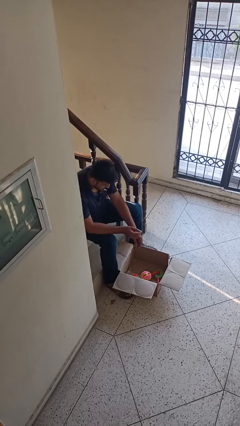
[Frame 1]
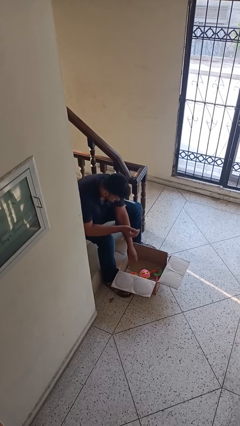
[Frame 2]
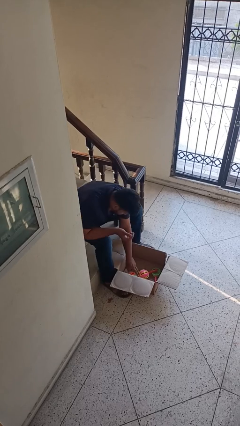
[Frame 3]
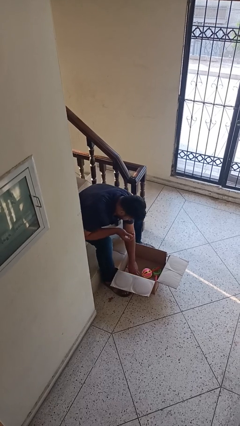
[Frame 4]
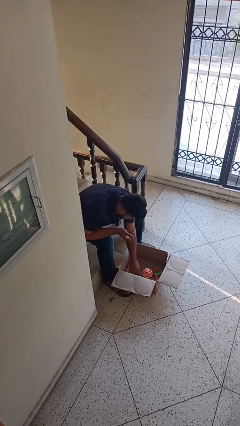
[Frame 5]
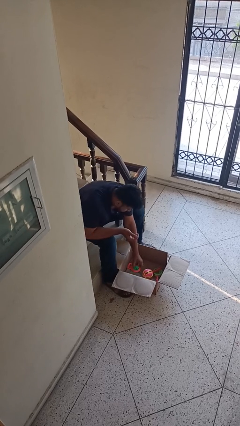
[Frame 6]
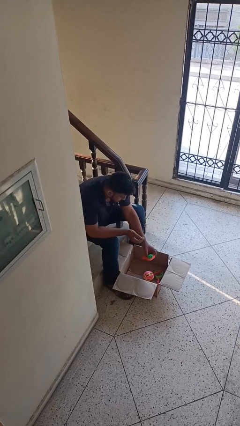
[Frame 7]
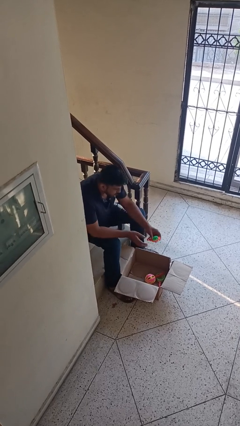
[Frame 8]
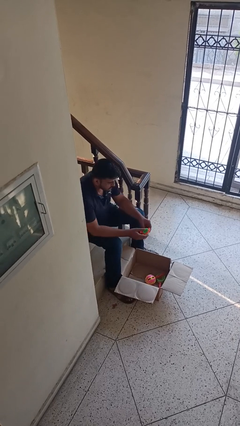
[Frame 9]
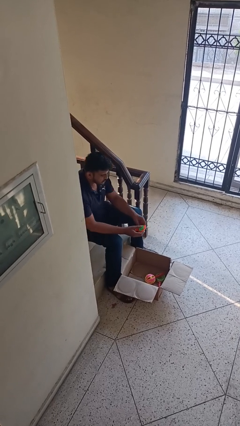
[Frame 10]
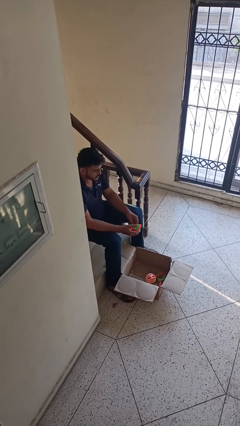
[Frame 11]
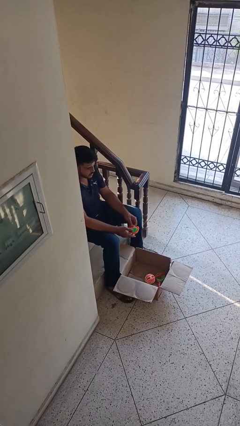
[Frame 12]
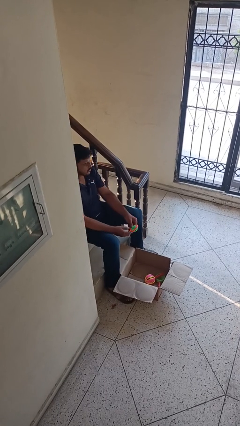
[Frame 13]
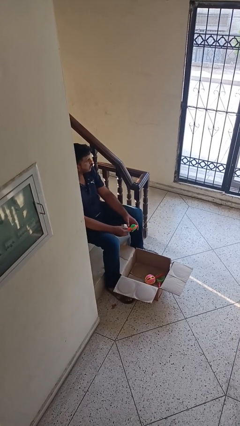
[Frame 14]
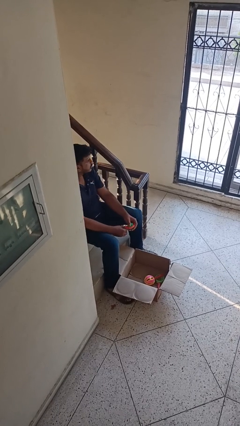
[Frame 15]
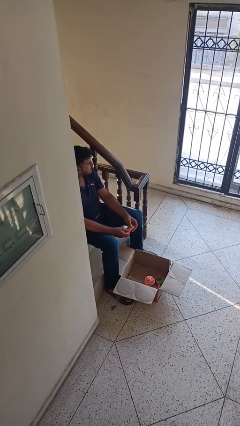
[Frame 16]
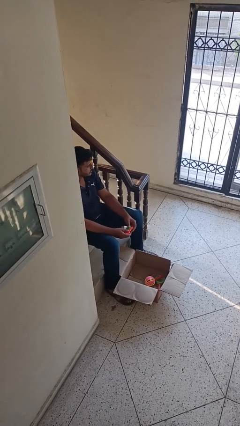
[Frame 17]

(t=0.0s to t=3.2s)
person takes object from box

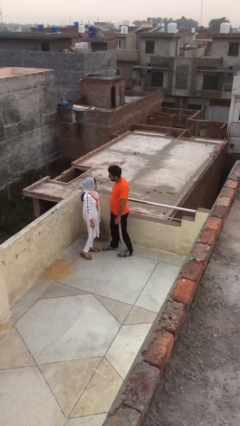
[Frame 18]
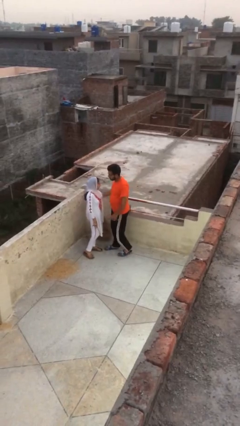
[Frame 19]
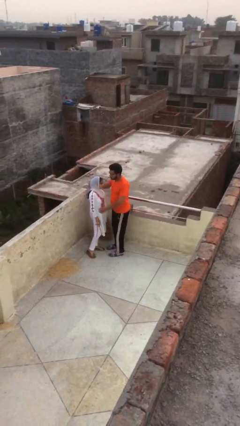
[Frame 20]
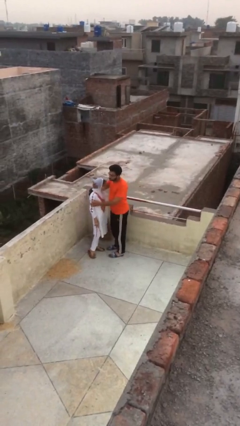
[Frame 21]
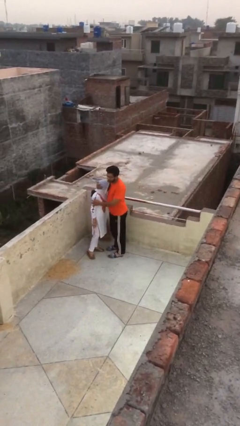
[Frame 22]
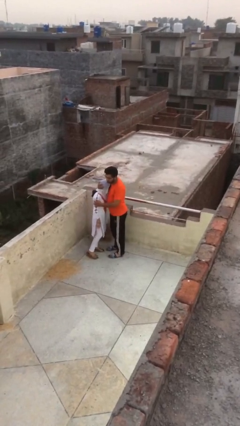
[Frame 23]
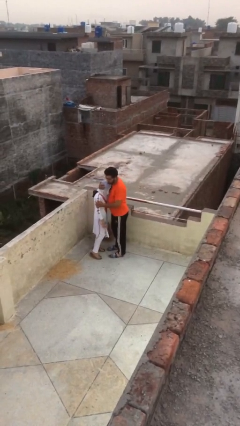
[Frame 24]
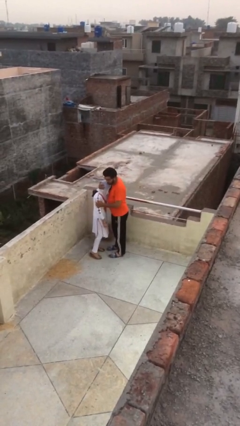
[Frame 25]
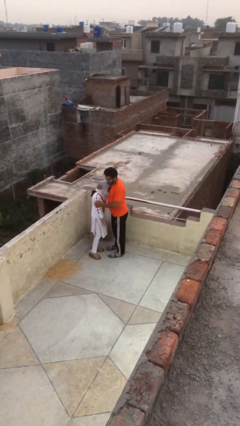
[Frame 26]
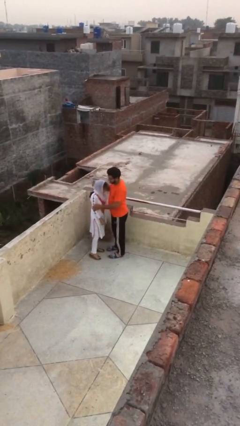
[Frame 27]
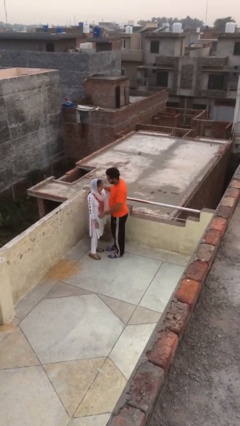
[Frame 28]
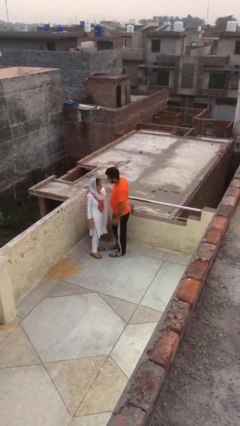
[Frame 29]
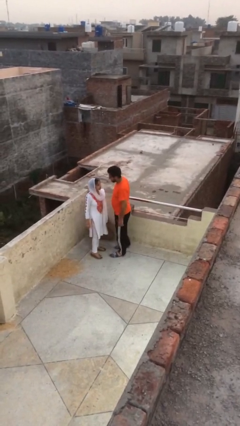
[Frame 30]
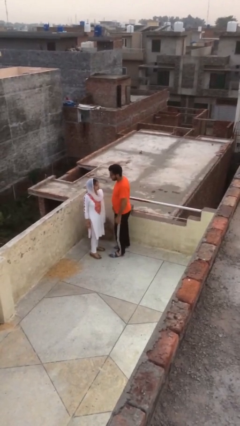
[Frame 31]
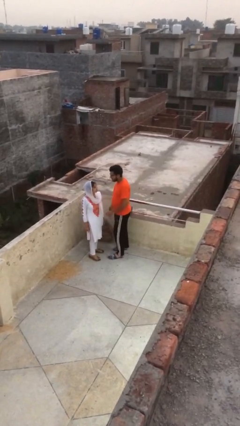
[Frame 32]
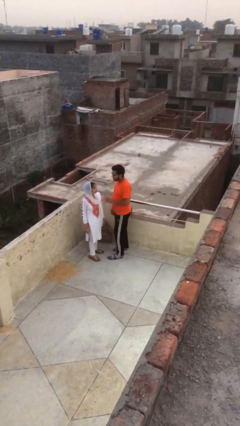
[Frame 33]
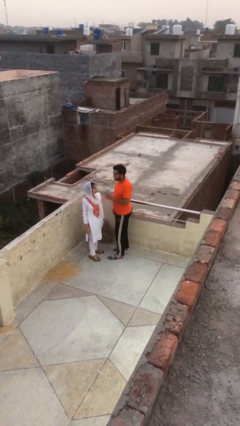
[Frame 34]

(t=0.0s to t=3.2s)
person embraces person

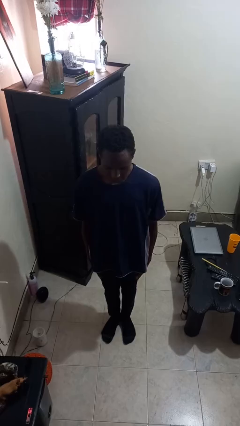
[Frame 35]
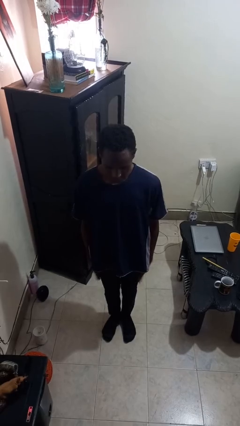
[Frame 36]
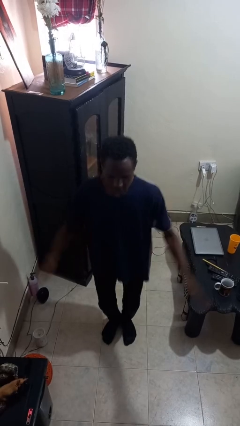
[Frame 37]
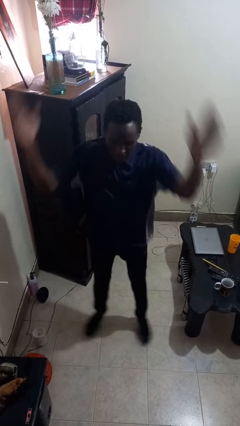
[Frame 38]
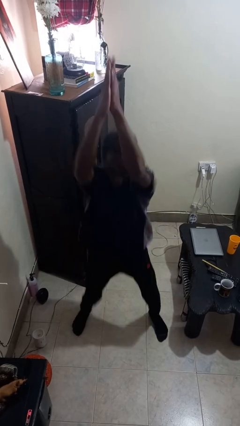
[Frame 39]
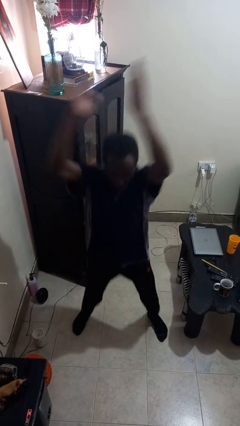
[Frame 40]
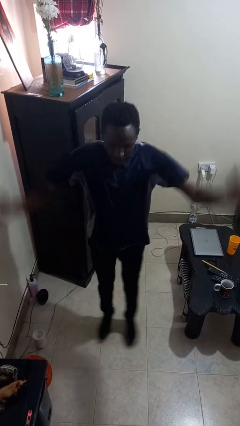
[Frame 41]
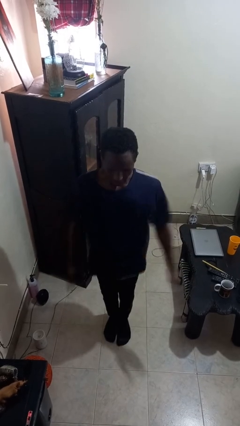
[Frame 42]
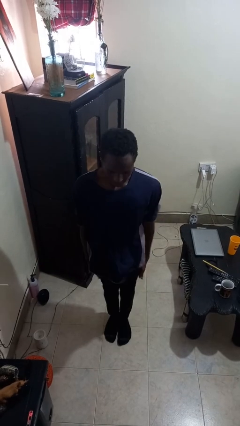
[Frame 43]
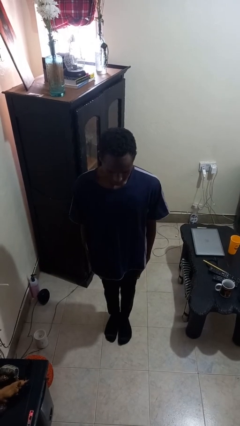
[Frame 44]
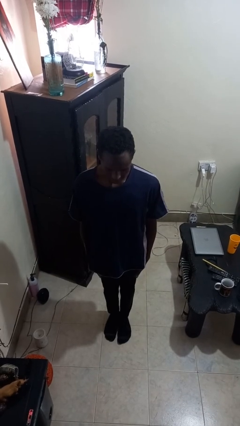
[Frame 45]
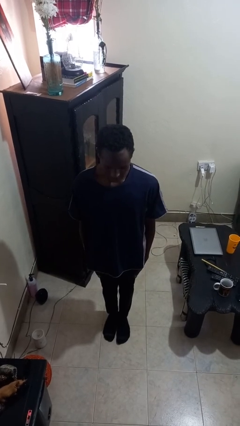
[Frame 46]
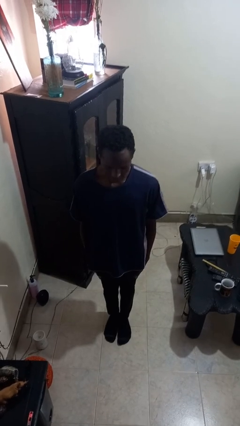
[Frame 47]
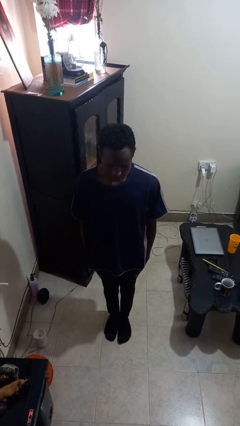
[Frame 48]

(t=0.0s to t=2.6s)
person exercises with jumping jacks

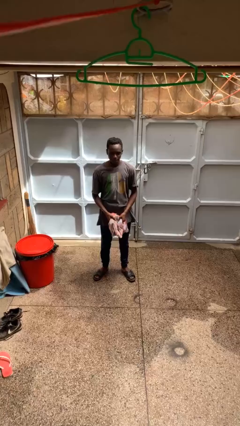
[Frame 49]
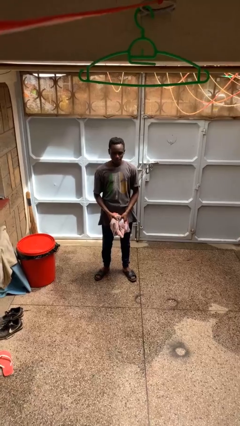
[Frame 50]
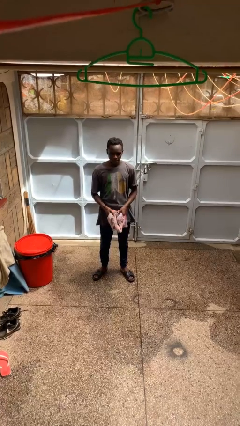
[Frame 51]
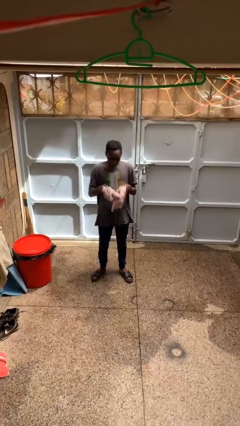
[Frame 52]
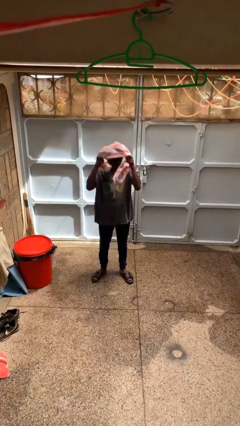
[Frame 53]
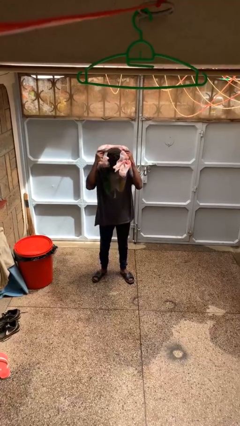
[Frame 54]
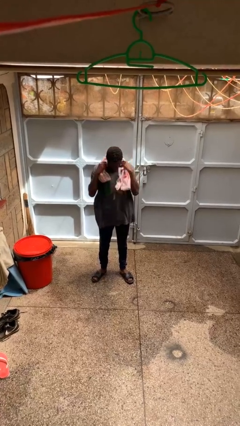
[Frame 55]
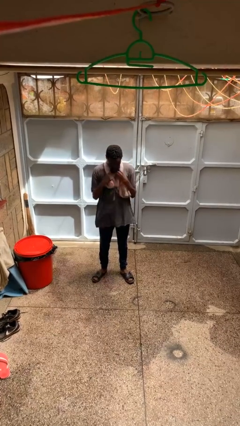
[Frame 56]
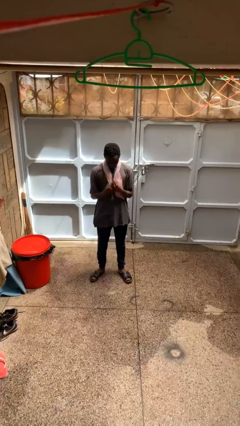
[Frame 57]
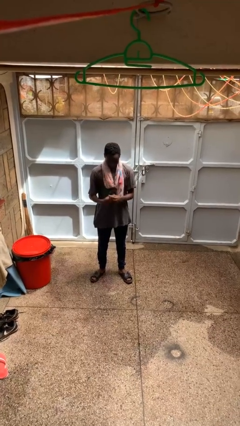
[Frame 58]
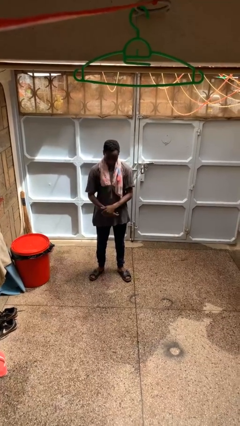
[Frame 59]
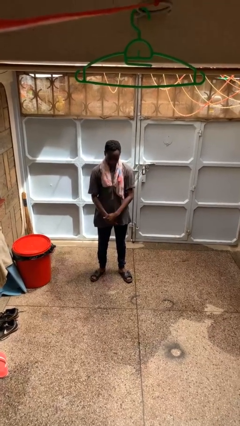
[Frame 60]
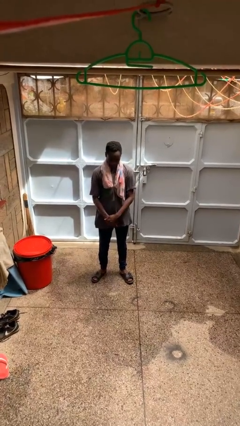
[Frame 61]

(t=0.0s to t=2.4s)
person puts on scarf

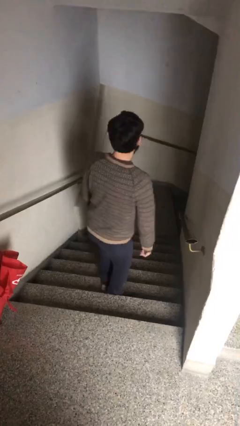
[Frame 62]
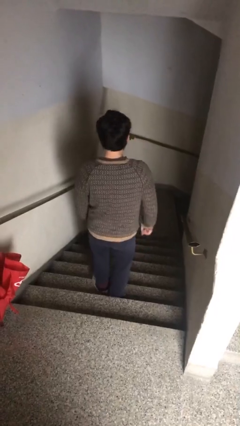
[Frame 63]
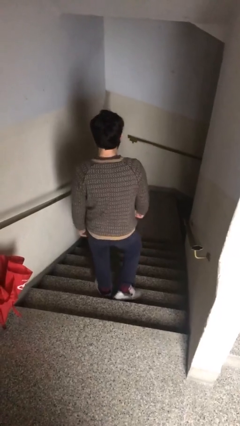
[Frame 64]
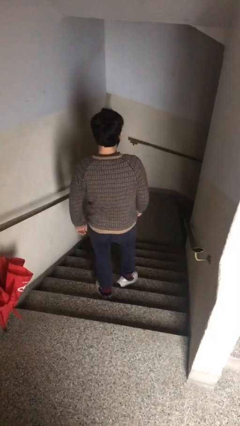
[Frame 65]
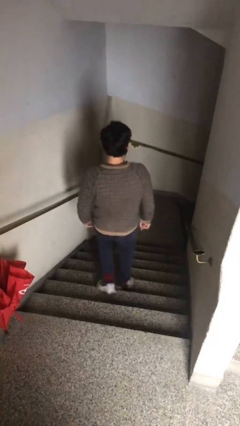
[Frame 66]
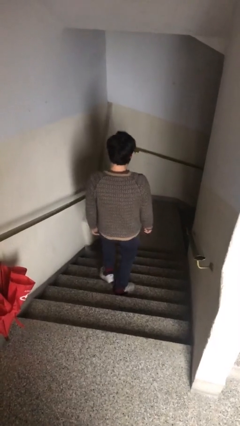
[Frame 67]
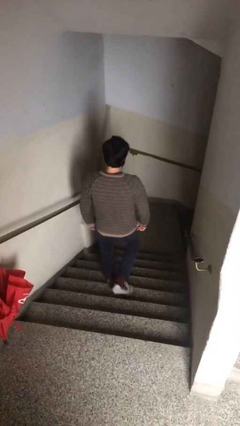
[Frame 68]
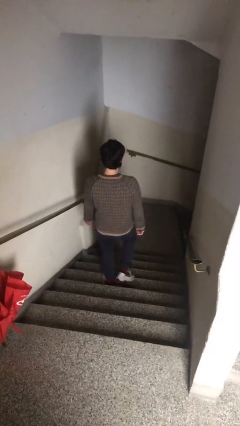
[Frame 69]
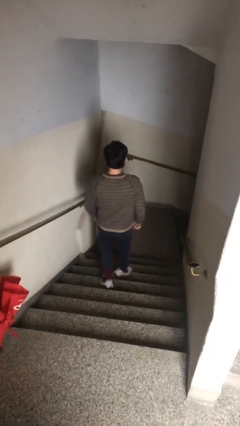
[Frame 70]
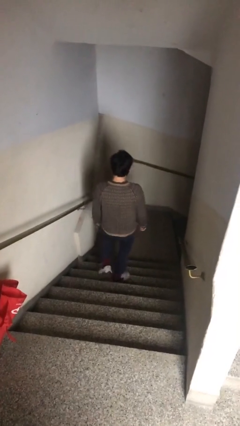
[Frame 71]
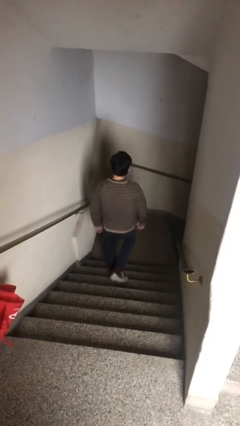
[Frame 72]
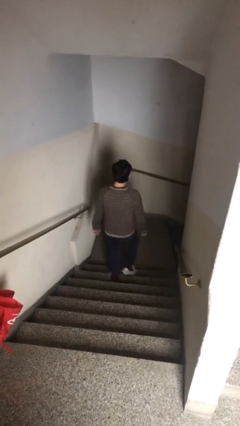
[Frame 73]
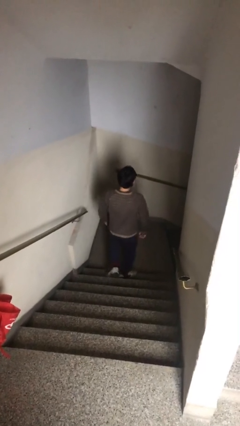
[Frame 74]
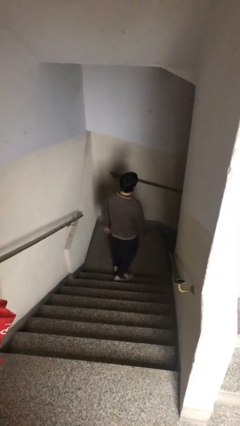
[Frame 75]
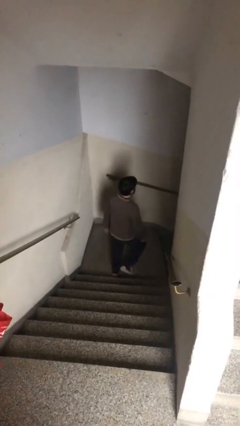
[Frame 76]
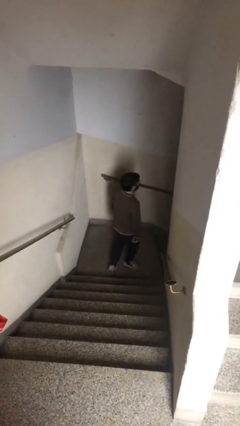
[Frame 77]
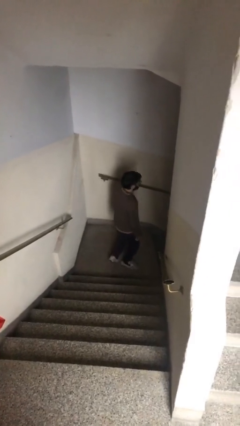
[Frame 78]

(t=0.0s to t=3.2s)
person climbs down stairs

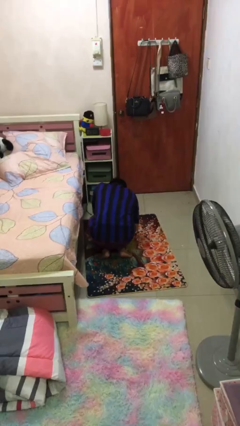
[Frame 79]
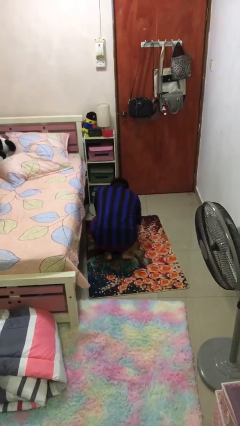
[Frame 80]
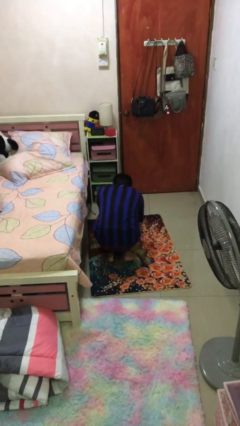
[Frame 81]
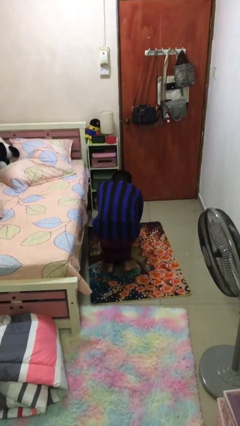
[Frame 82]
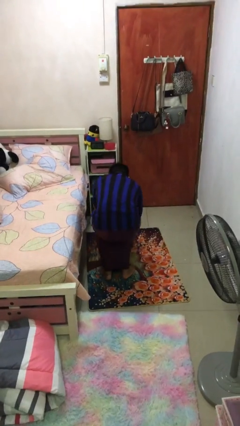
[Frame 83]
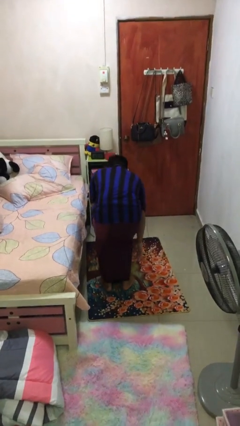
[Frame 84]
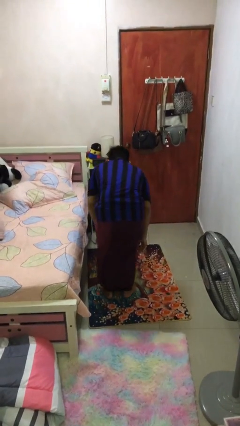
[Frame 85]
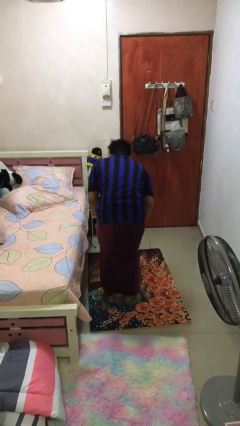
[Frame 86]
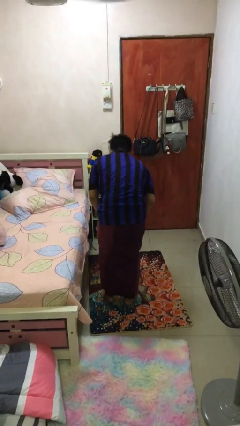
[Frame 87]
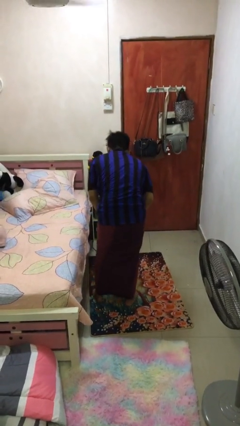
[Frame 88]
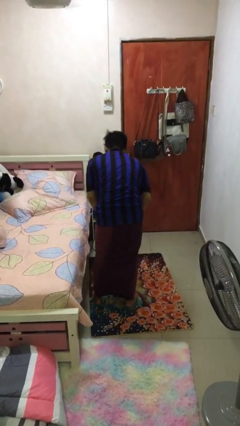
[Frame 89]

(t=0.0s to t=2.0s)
person stands up from floor

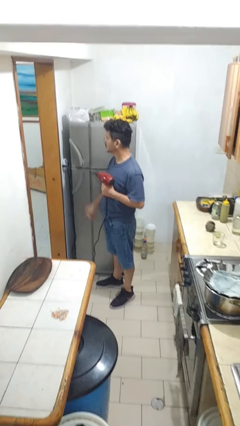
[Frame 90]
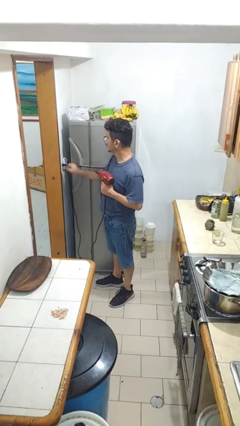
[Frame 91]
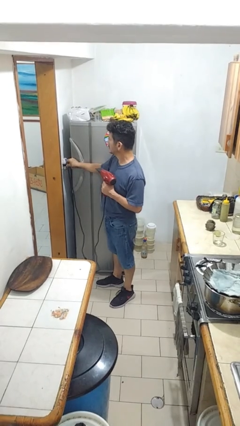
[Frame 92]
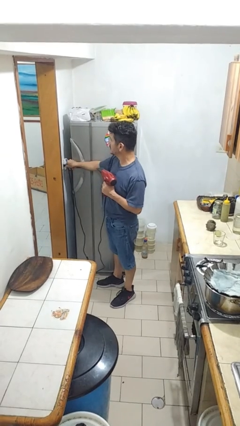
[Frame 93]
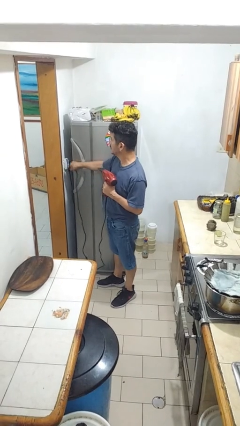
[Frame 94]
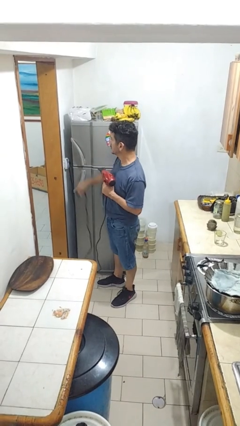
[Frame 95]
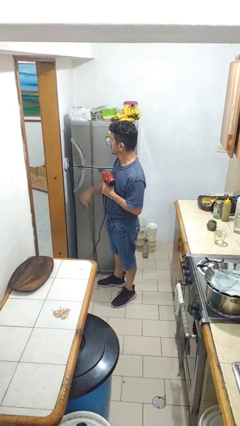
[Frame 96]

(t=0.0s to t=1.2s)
person unplugs from electrical socket
